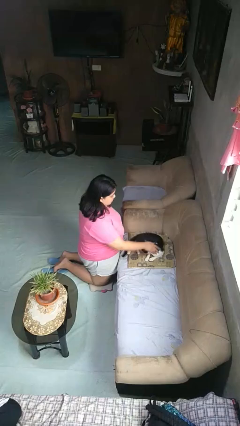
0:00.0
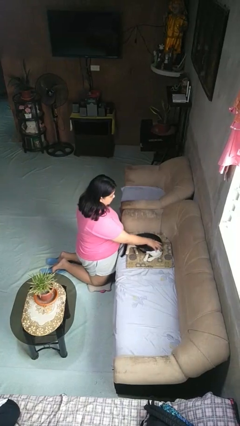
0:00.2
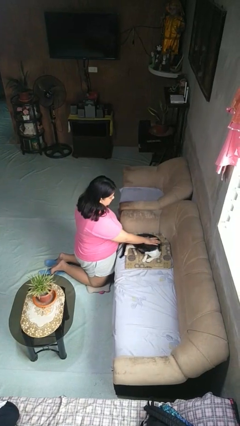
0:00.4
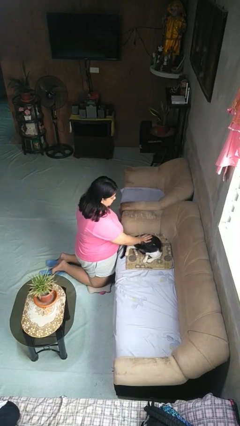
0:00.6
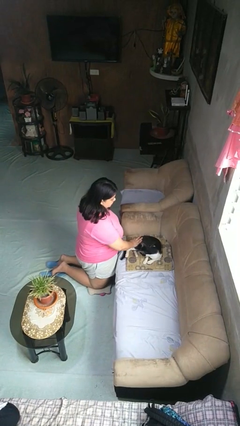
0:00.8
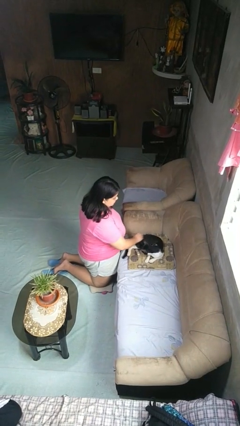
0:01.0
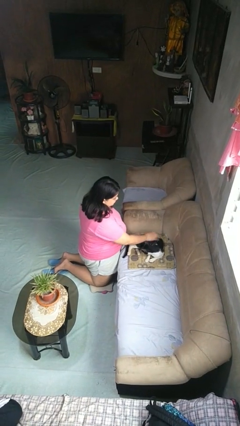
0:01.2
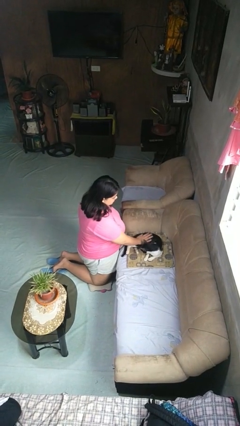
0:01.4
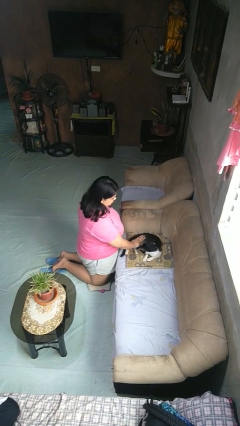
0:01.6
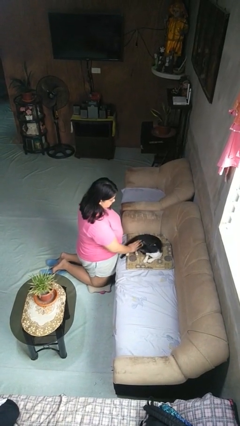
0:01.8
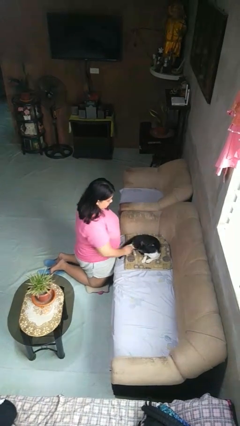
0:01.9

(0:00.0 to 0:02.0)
person pets cat

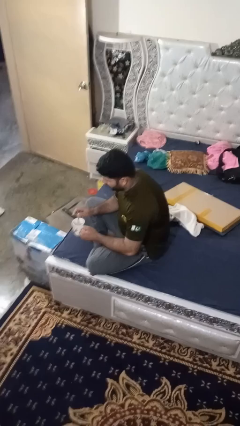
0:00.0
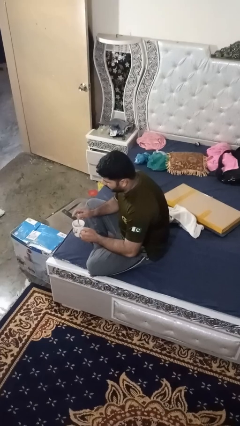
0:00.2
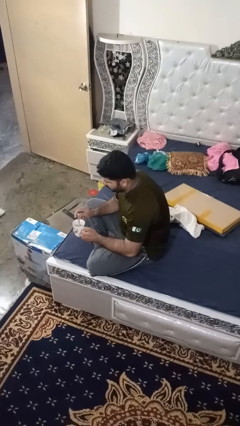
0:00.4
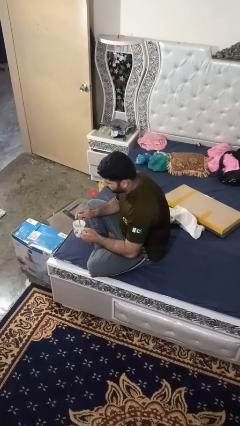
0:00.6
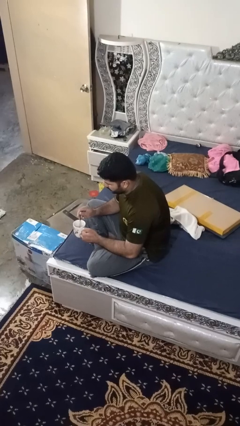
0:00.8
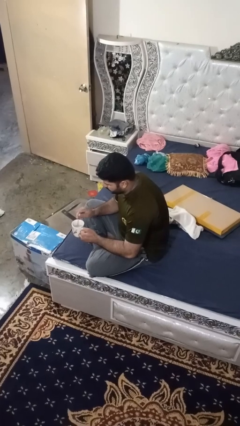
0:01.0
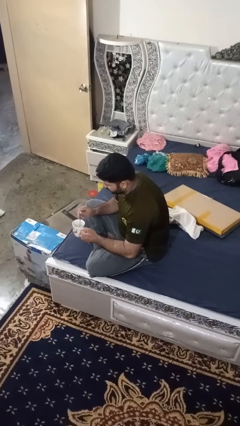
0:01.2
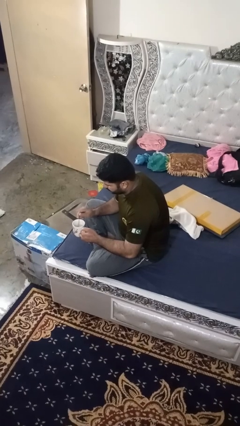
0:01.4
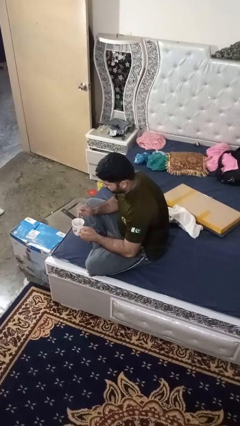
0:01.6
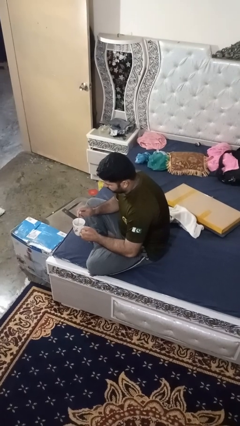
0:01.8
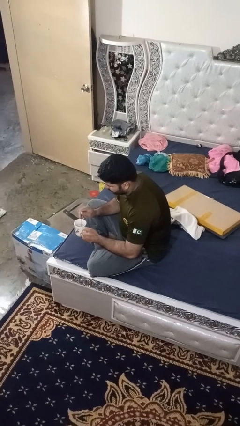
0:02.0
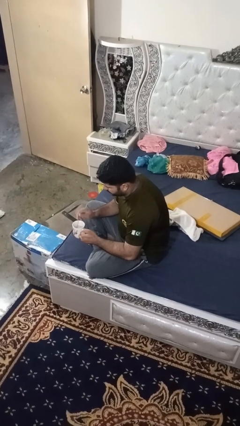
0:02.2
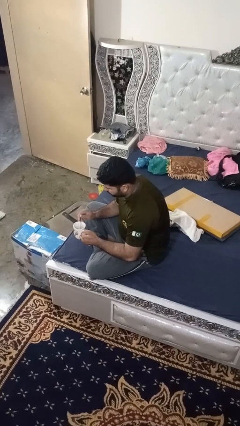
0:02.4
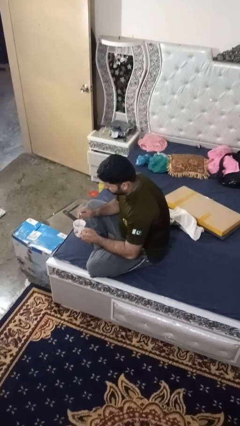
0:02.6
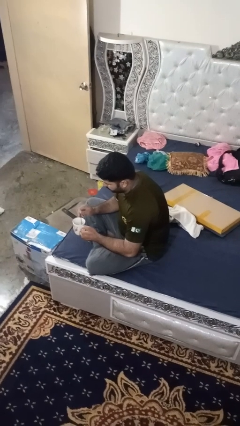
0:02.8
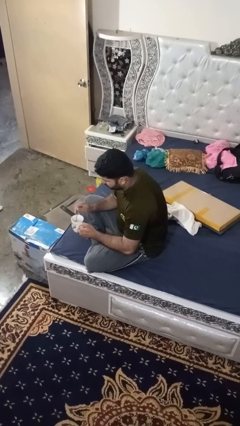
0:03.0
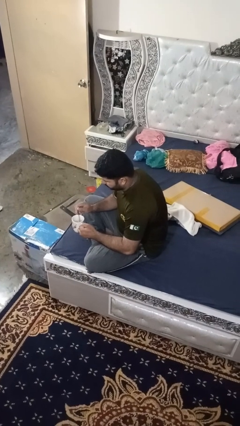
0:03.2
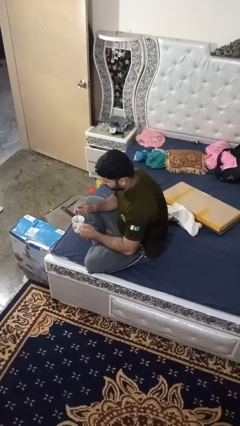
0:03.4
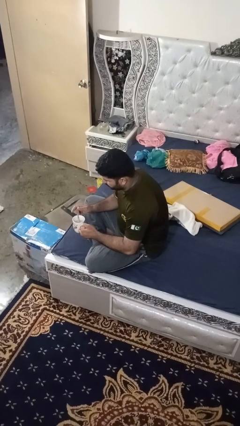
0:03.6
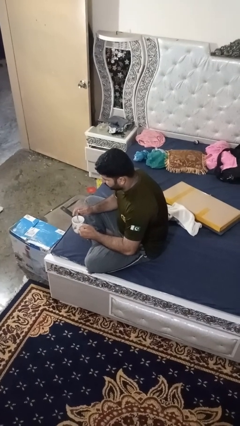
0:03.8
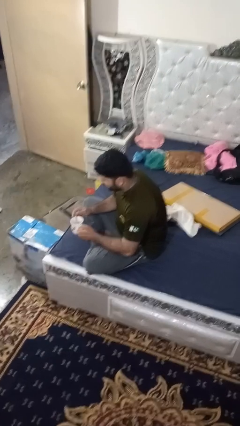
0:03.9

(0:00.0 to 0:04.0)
person stirs mug

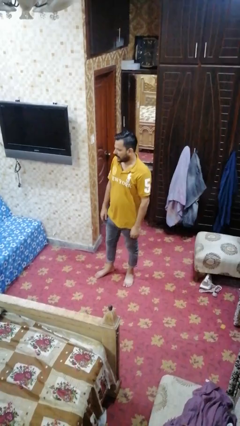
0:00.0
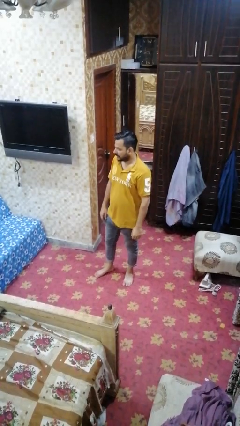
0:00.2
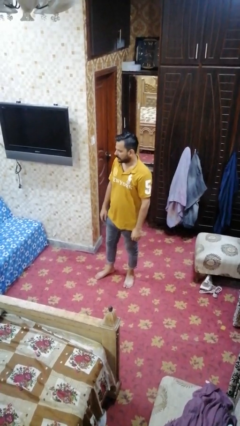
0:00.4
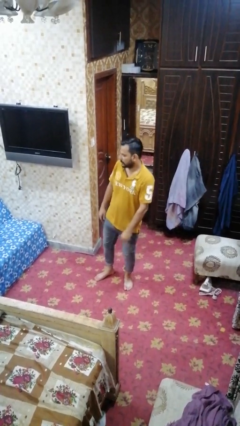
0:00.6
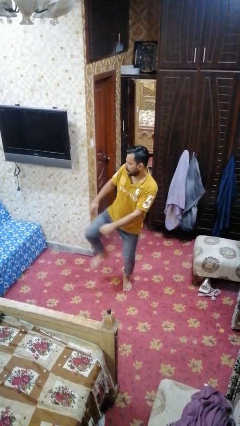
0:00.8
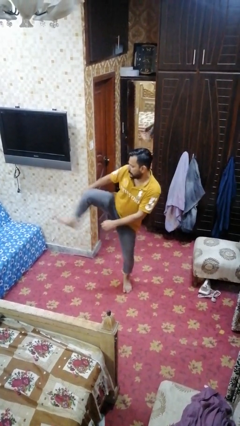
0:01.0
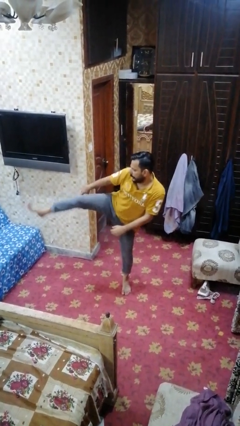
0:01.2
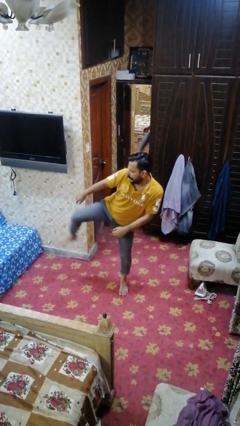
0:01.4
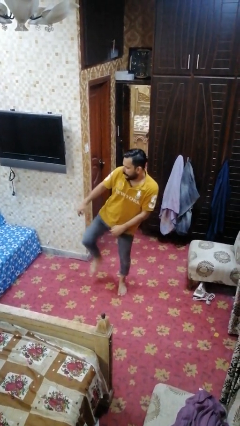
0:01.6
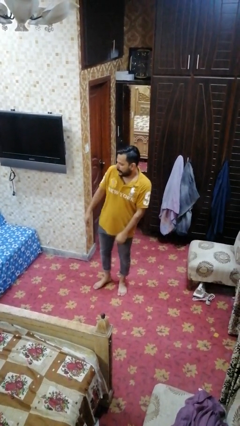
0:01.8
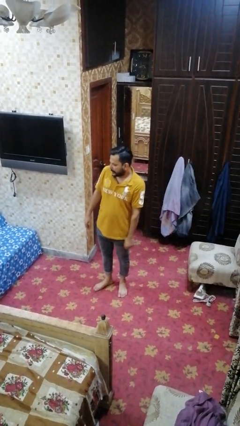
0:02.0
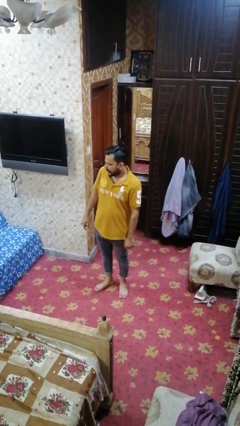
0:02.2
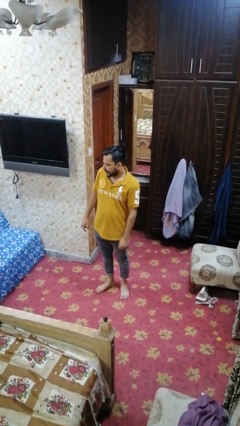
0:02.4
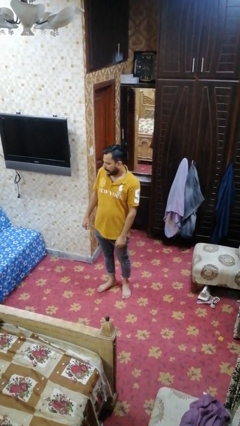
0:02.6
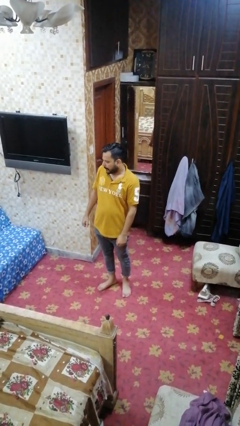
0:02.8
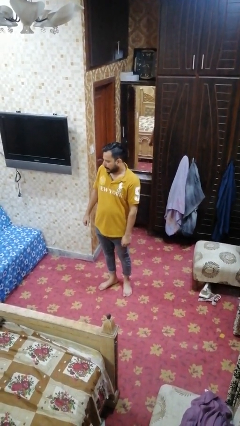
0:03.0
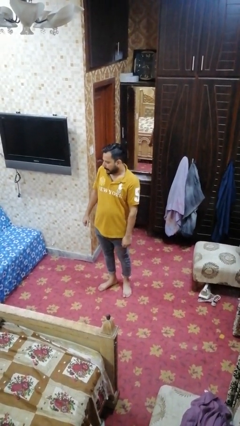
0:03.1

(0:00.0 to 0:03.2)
person karate kicks

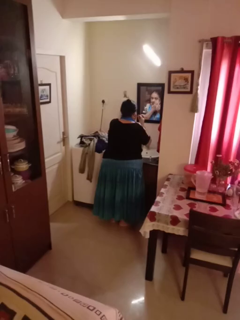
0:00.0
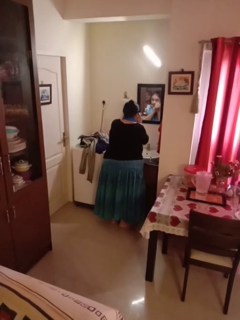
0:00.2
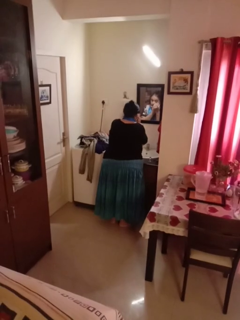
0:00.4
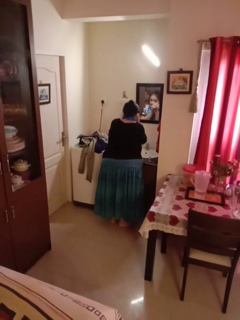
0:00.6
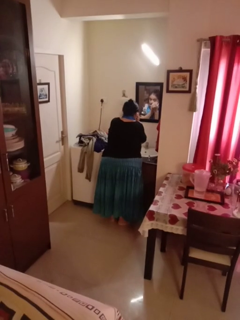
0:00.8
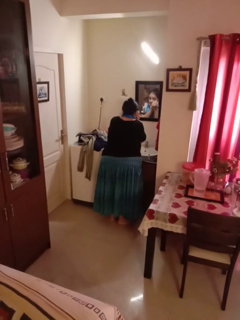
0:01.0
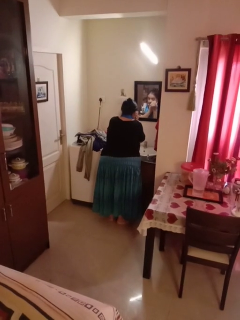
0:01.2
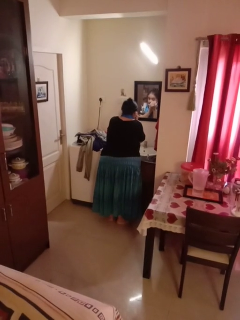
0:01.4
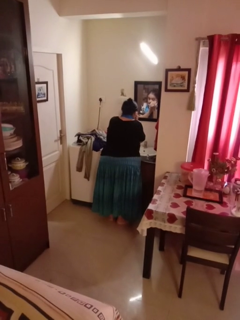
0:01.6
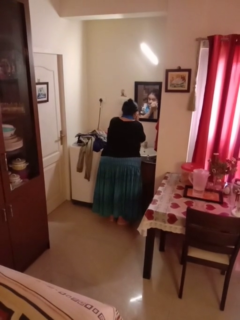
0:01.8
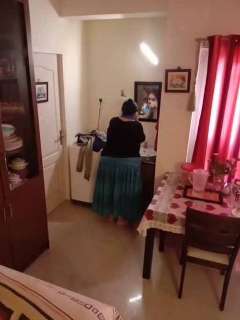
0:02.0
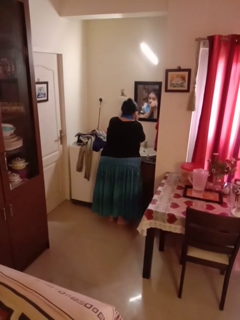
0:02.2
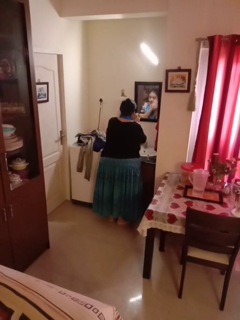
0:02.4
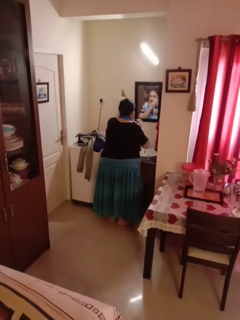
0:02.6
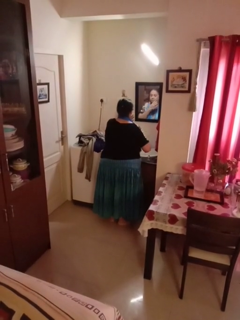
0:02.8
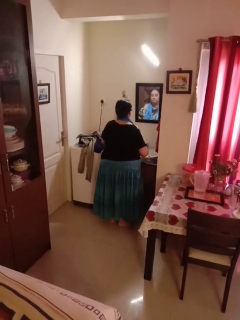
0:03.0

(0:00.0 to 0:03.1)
person applies eye makeup

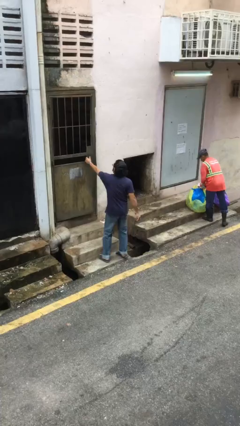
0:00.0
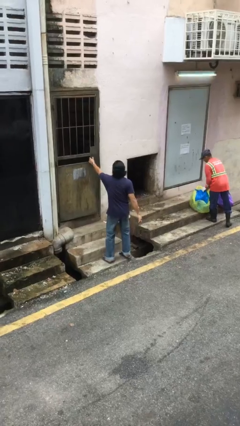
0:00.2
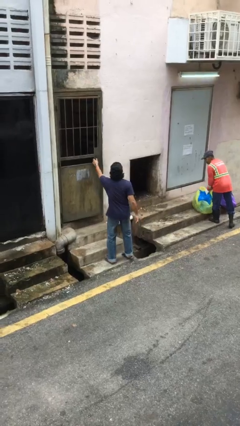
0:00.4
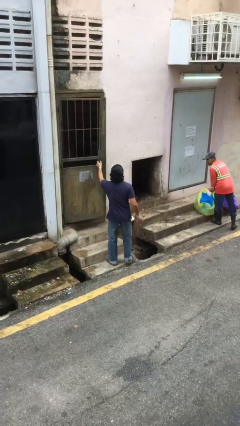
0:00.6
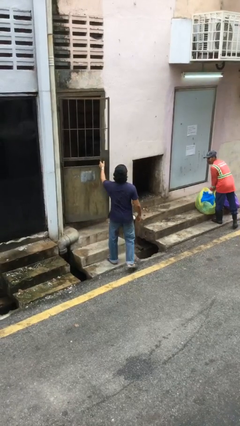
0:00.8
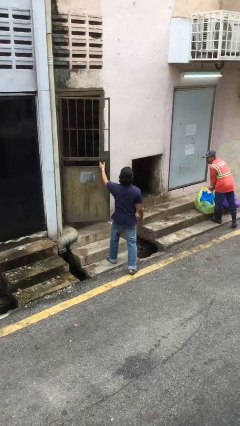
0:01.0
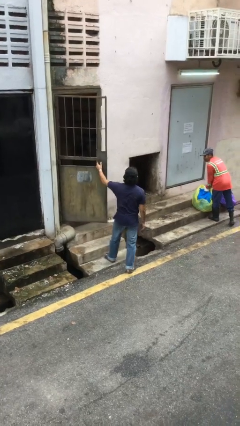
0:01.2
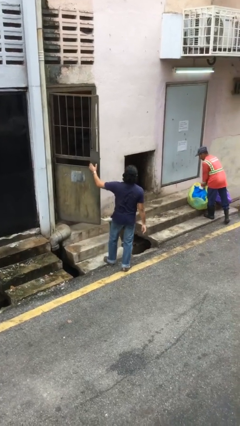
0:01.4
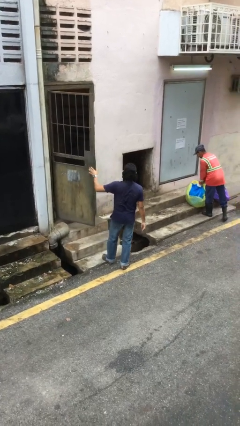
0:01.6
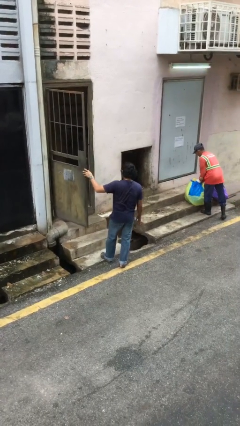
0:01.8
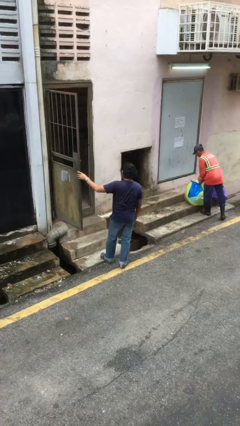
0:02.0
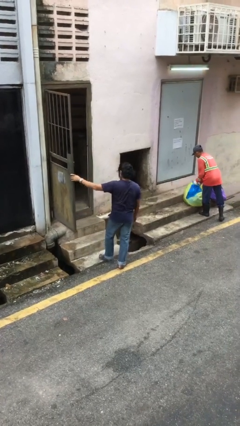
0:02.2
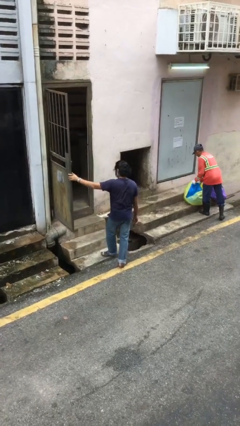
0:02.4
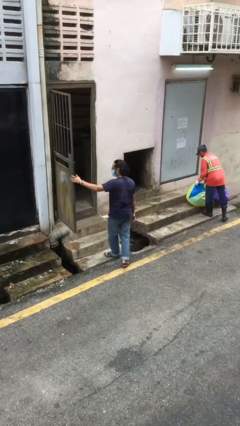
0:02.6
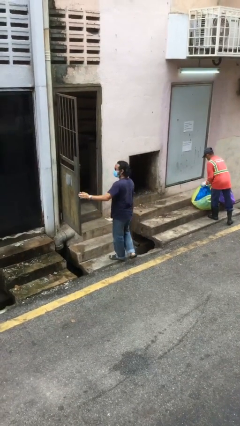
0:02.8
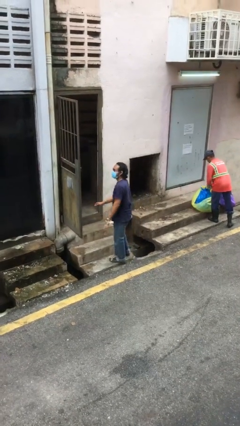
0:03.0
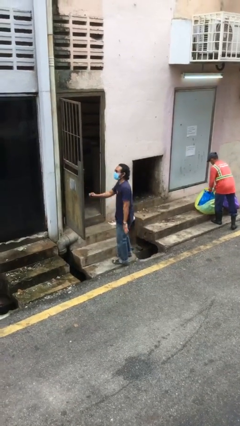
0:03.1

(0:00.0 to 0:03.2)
person opens facility door

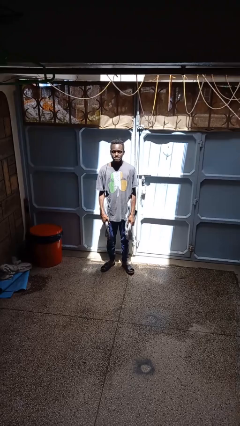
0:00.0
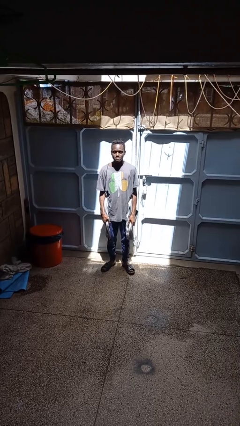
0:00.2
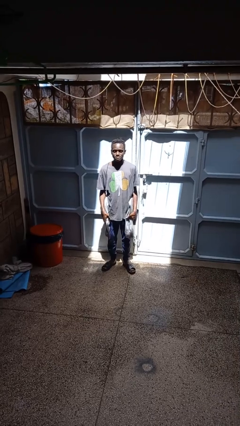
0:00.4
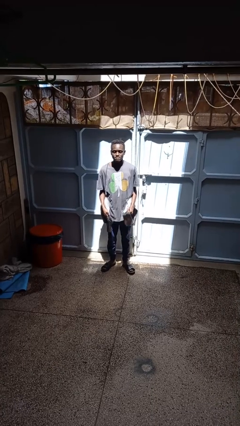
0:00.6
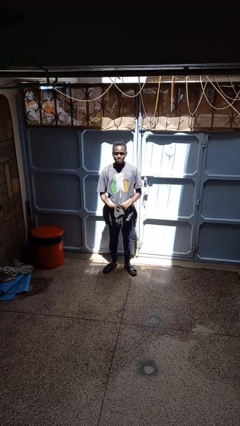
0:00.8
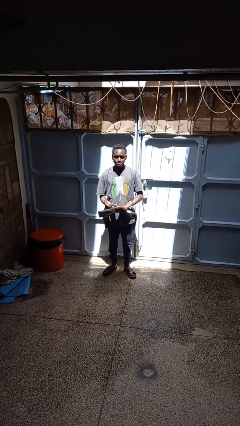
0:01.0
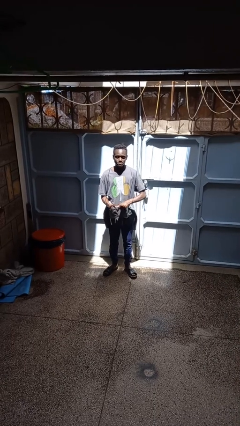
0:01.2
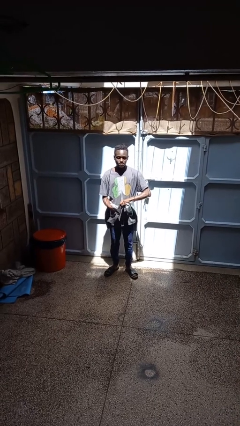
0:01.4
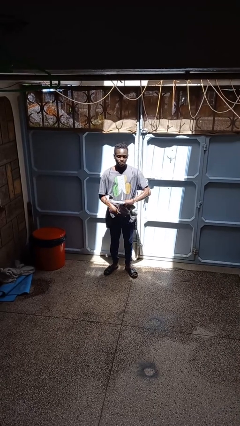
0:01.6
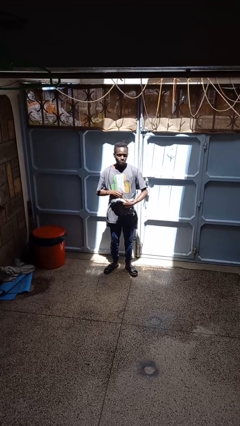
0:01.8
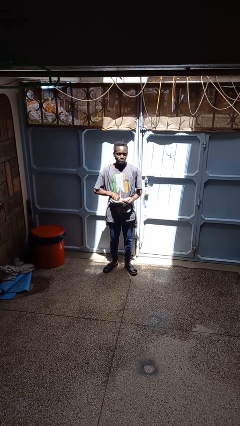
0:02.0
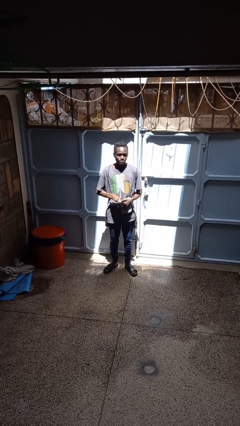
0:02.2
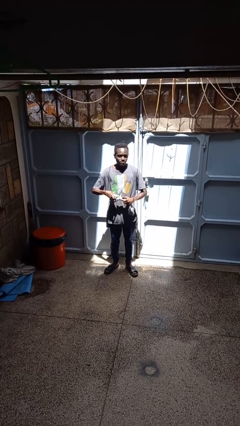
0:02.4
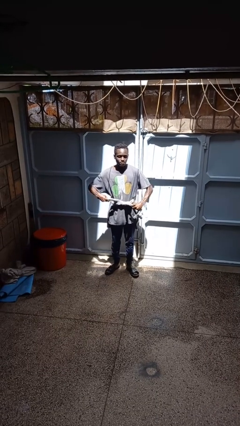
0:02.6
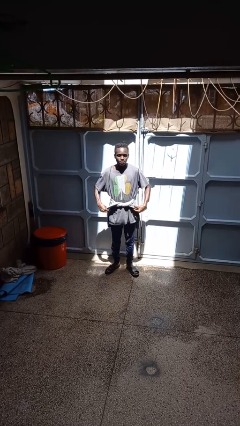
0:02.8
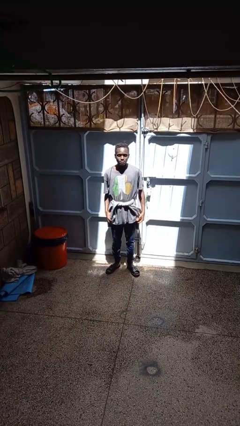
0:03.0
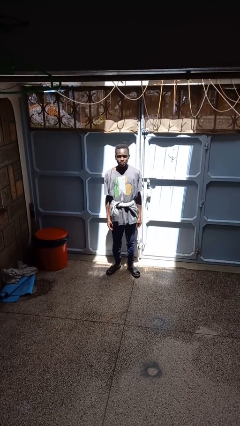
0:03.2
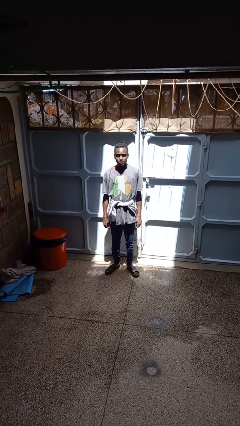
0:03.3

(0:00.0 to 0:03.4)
person ties jacket around waist
